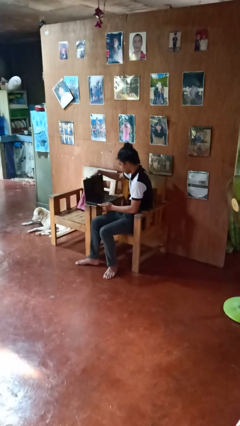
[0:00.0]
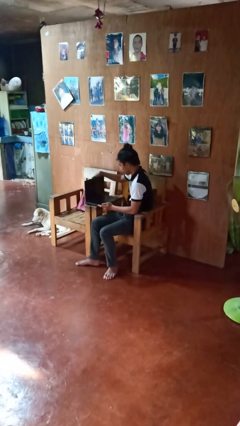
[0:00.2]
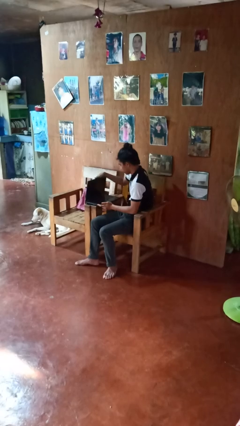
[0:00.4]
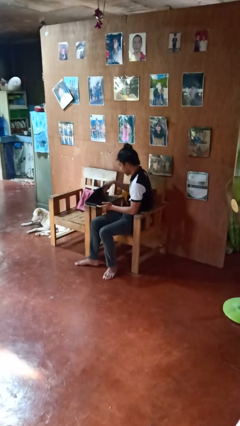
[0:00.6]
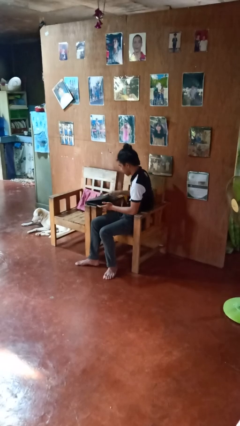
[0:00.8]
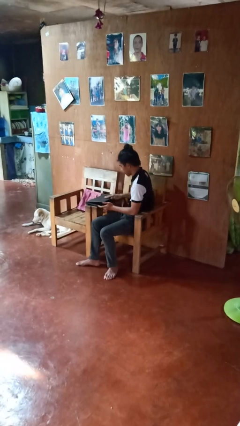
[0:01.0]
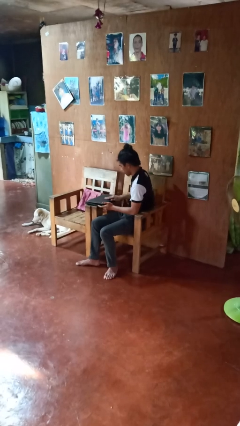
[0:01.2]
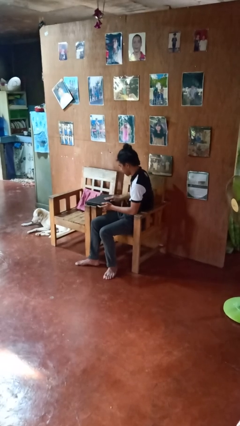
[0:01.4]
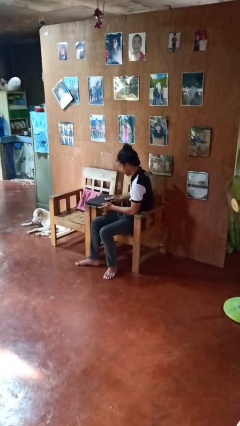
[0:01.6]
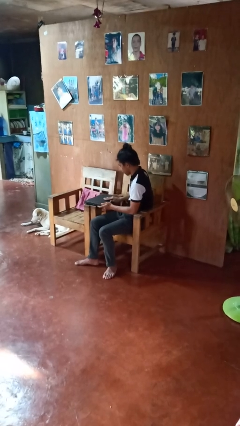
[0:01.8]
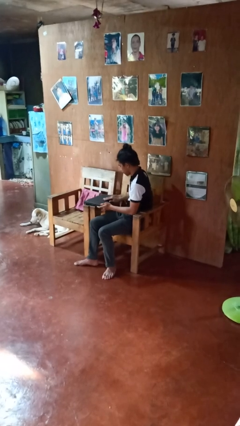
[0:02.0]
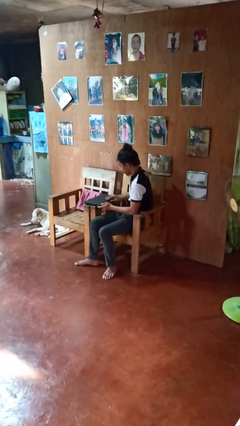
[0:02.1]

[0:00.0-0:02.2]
person closes laptop

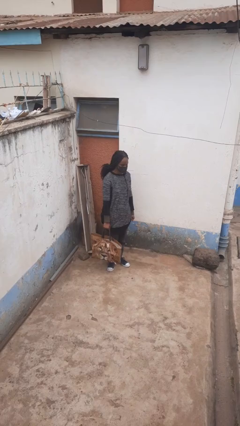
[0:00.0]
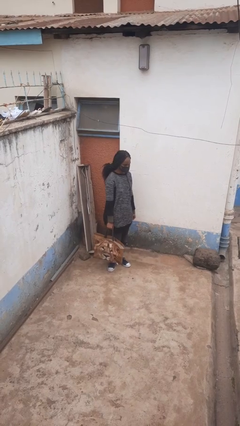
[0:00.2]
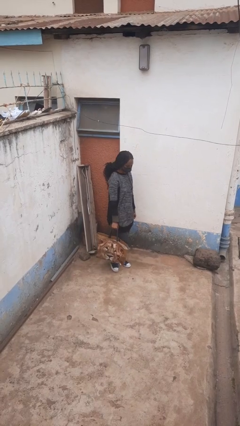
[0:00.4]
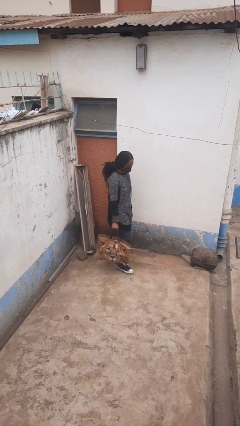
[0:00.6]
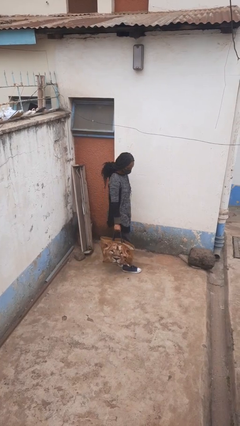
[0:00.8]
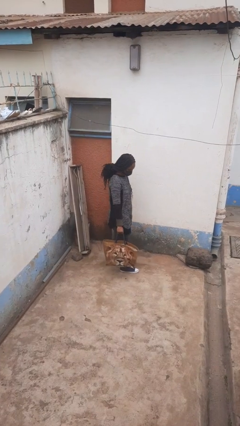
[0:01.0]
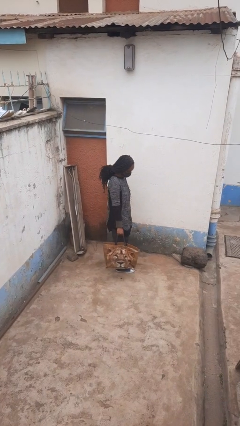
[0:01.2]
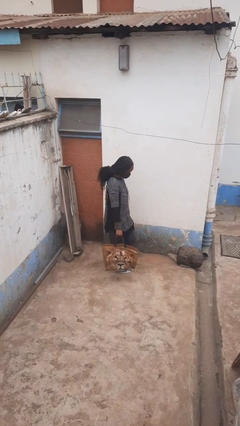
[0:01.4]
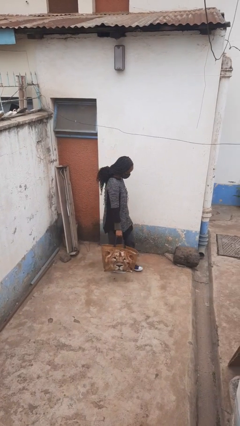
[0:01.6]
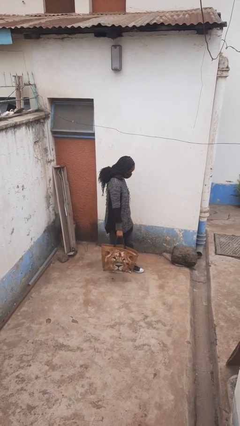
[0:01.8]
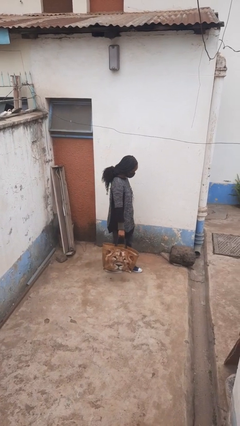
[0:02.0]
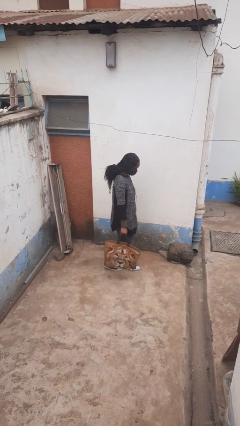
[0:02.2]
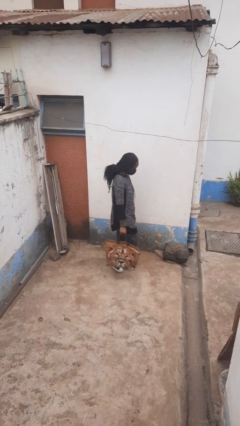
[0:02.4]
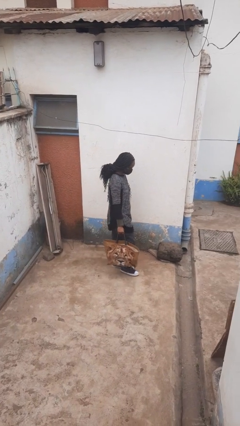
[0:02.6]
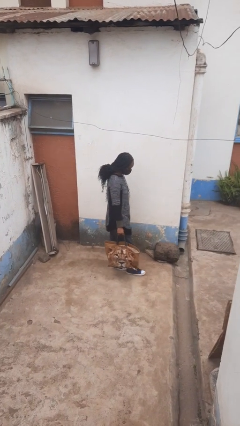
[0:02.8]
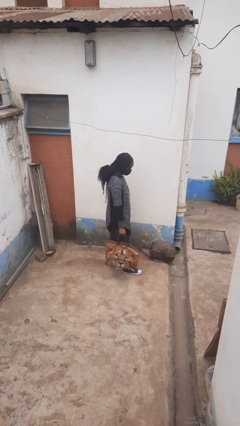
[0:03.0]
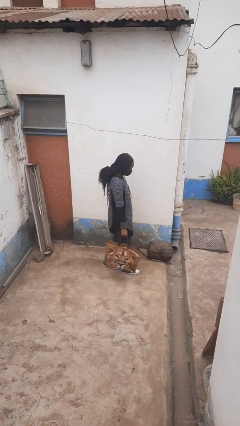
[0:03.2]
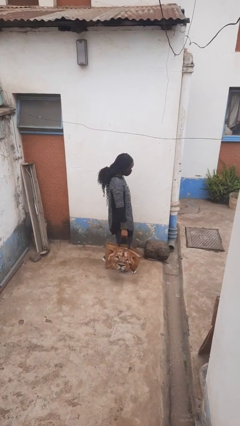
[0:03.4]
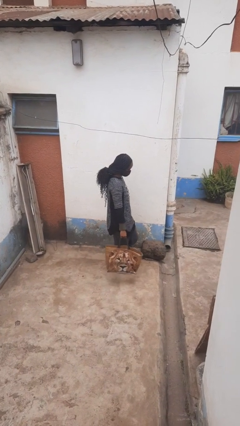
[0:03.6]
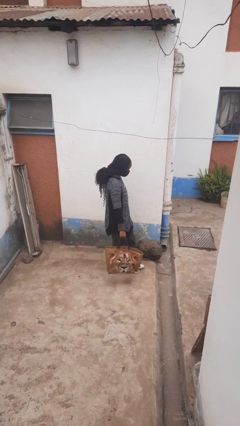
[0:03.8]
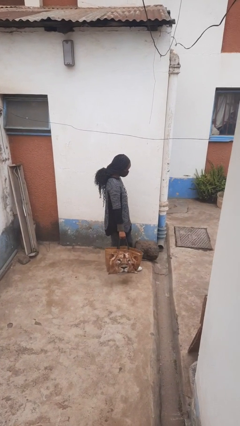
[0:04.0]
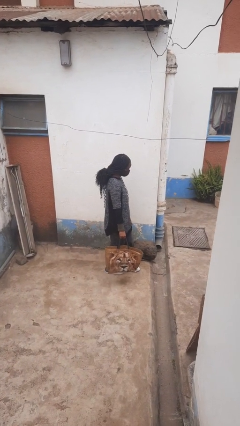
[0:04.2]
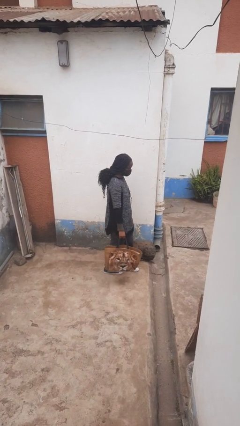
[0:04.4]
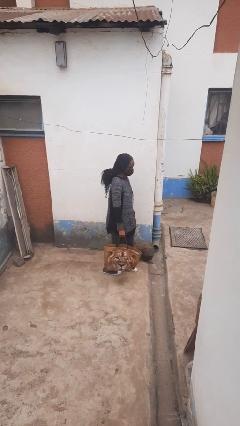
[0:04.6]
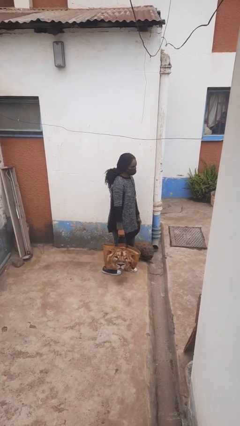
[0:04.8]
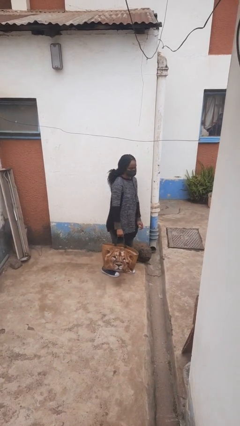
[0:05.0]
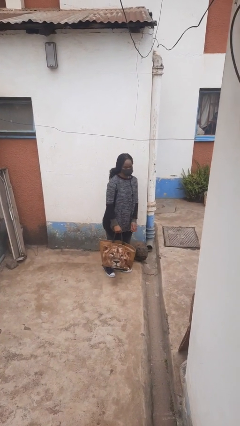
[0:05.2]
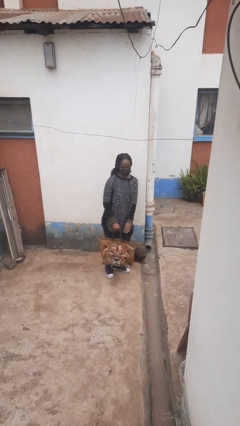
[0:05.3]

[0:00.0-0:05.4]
person carries groceries

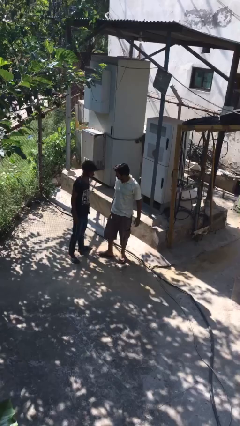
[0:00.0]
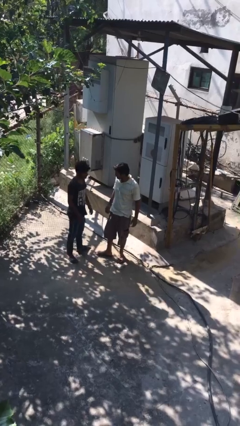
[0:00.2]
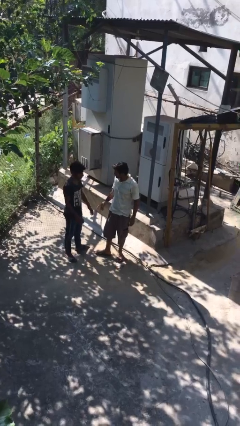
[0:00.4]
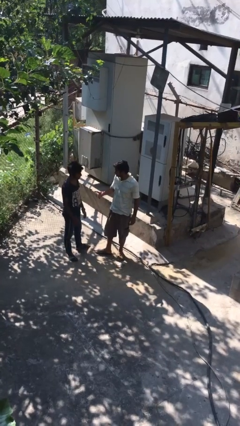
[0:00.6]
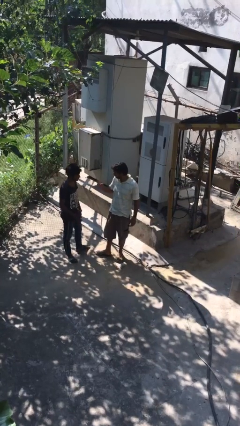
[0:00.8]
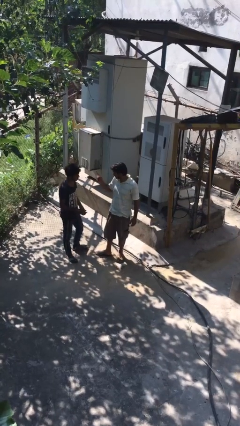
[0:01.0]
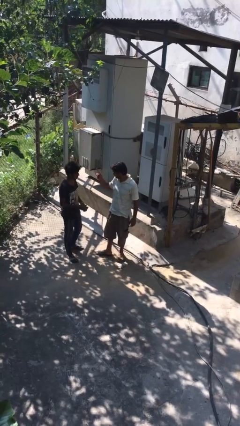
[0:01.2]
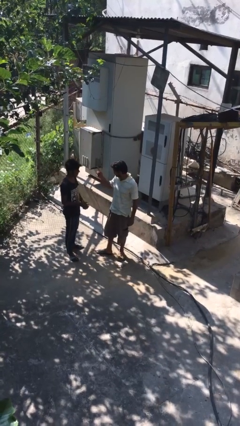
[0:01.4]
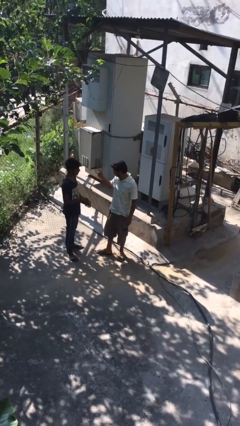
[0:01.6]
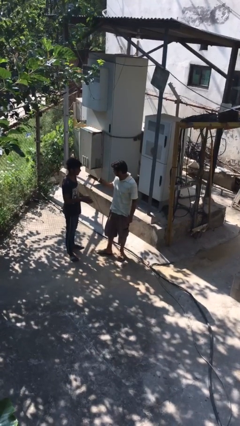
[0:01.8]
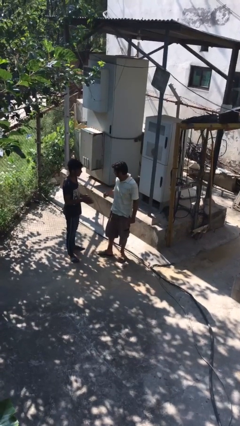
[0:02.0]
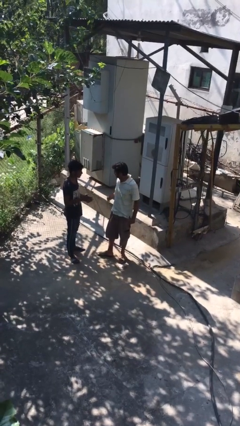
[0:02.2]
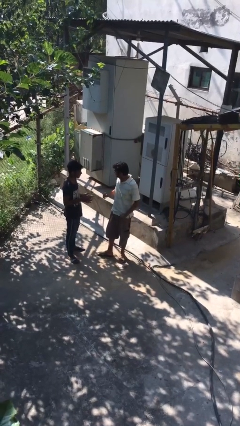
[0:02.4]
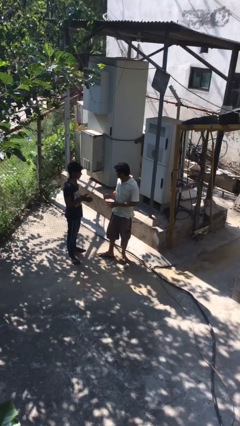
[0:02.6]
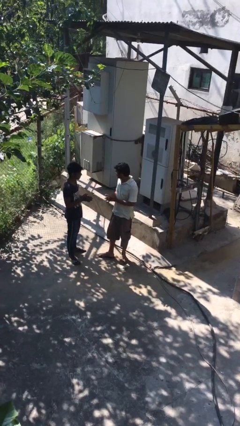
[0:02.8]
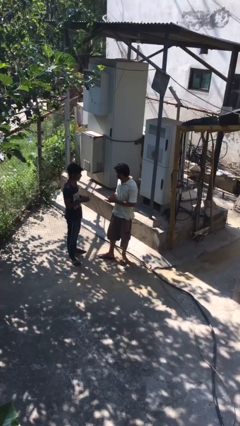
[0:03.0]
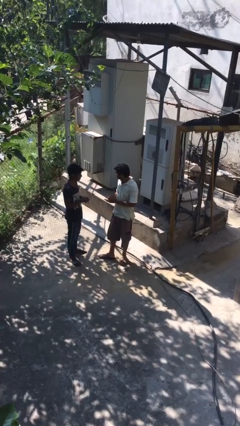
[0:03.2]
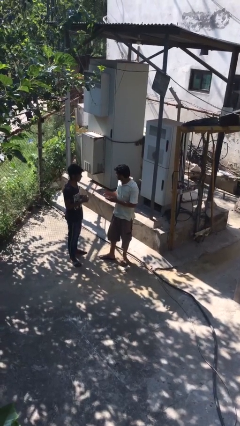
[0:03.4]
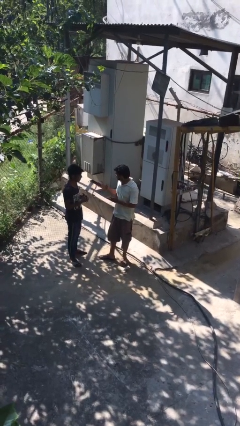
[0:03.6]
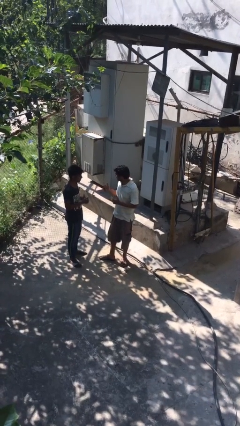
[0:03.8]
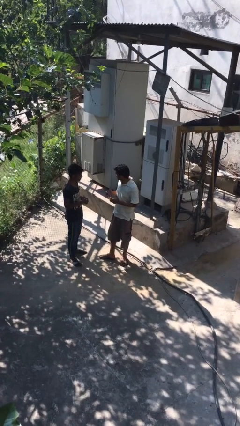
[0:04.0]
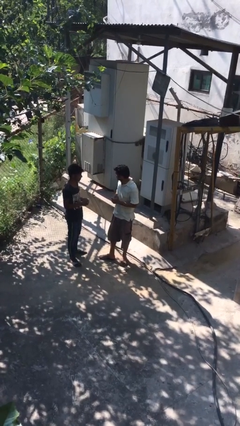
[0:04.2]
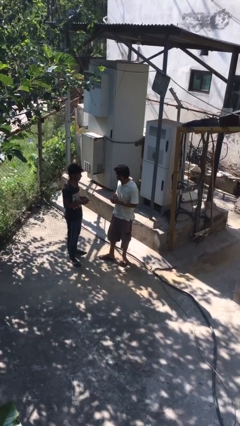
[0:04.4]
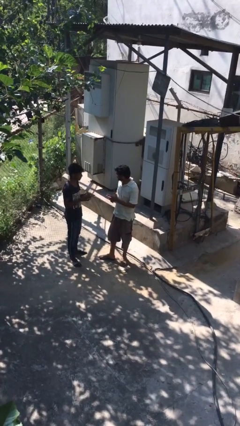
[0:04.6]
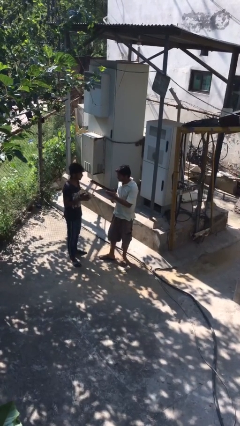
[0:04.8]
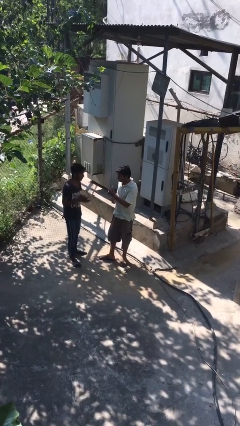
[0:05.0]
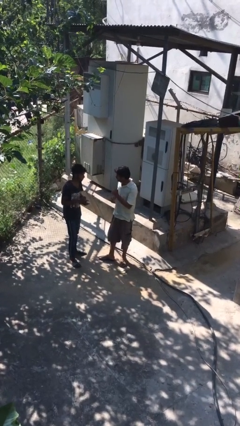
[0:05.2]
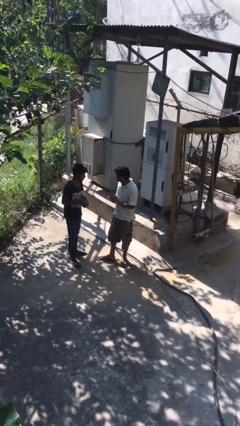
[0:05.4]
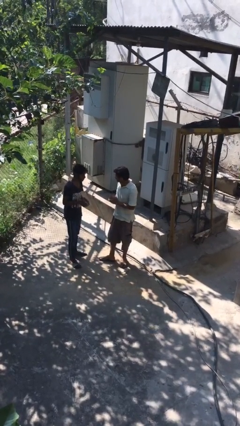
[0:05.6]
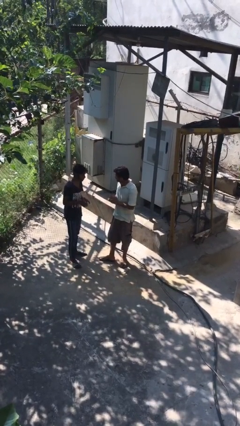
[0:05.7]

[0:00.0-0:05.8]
person talks to person

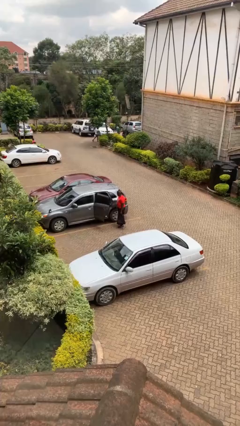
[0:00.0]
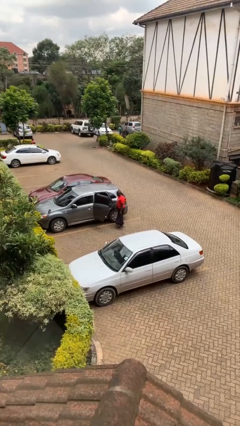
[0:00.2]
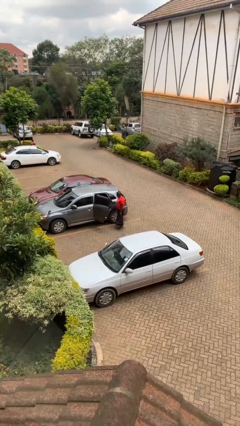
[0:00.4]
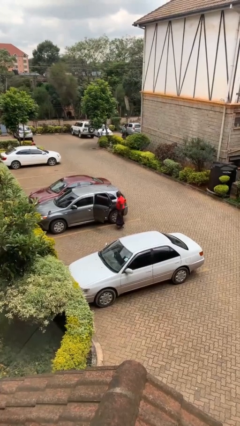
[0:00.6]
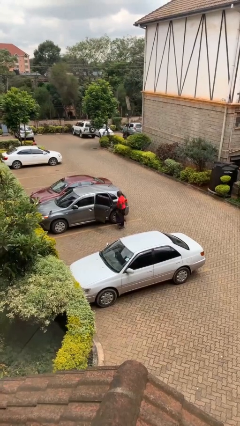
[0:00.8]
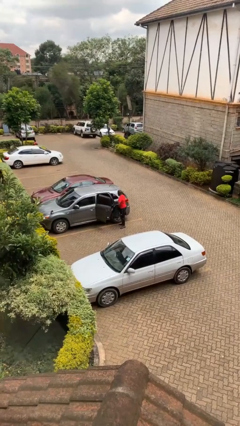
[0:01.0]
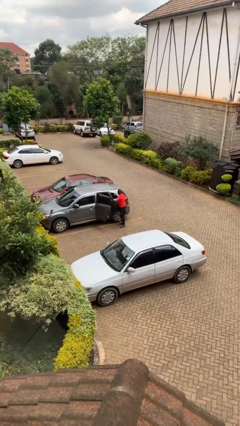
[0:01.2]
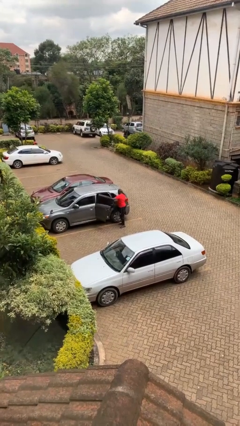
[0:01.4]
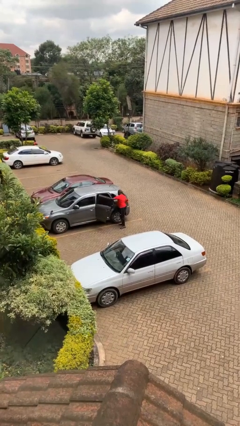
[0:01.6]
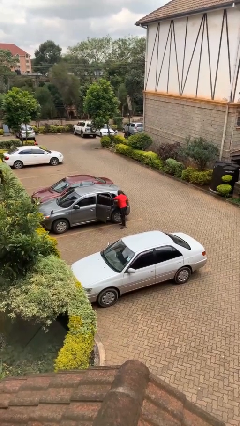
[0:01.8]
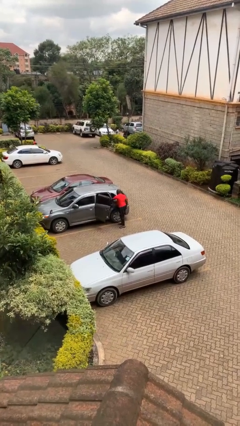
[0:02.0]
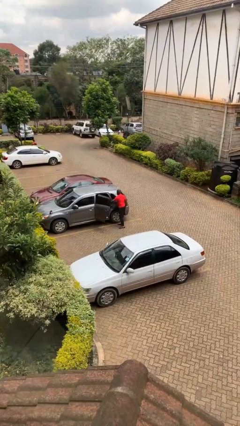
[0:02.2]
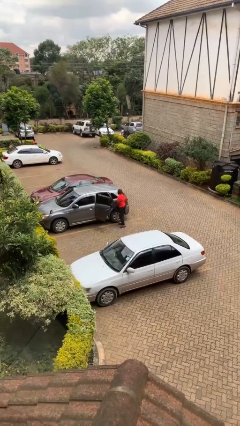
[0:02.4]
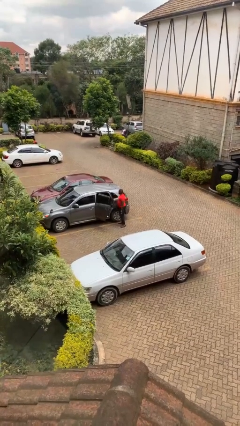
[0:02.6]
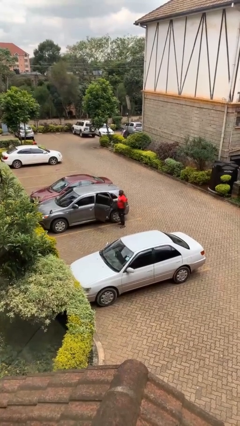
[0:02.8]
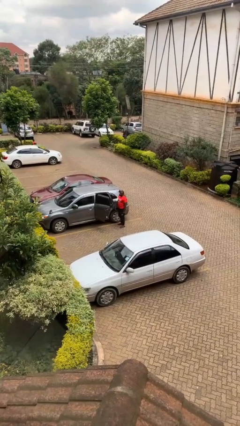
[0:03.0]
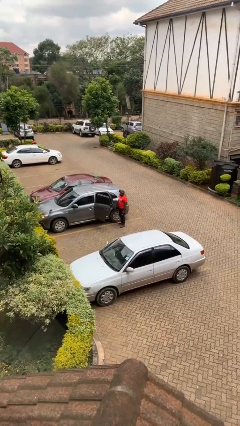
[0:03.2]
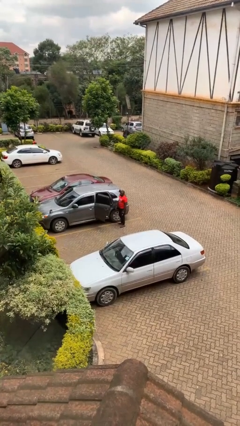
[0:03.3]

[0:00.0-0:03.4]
person loads car

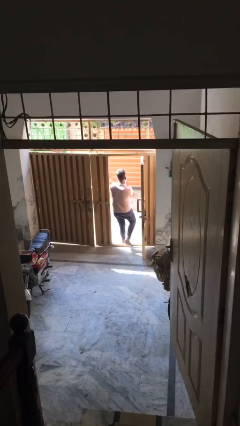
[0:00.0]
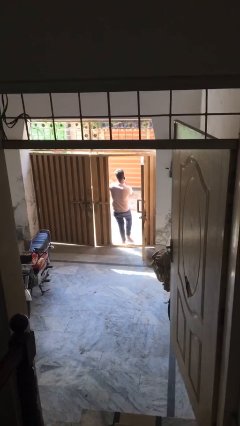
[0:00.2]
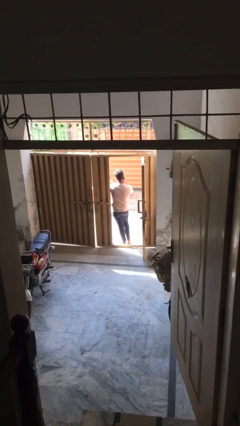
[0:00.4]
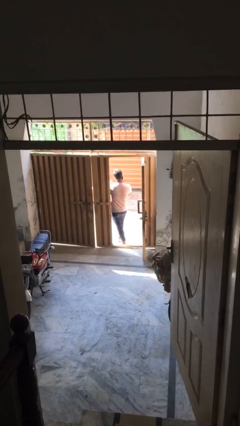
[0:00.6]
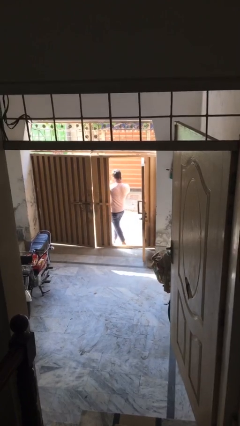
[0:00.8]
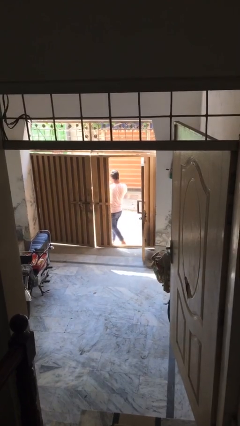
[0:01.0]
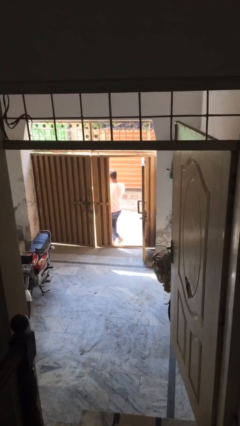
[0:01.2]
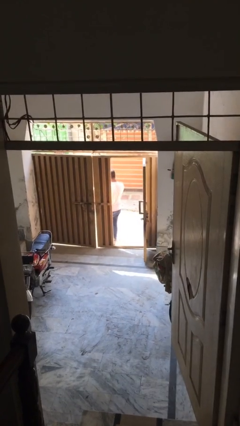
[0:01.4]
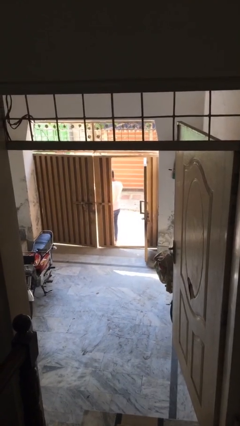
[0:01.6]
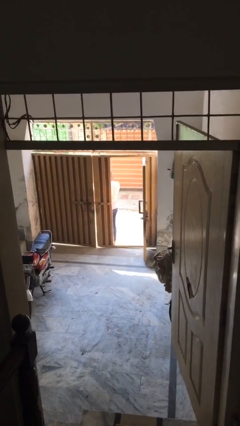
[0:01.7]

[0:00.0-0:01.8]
person exits scene through structure
